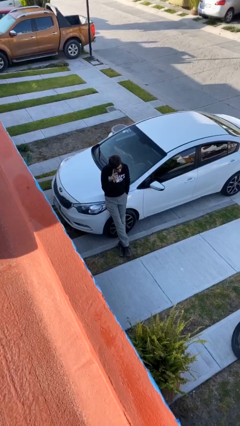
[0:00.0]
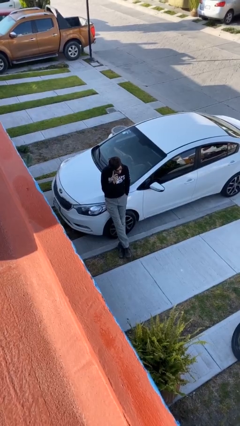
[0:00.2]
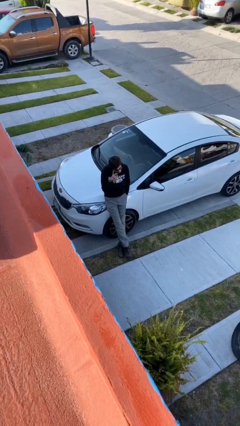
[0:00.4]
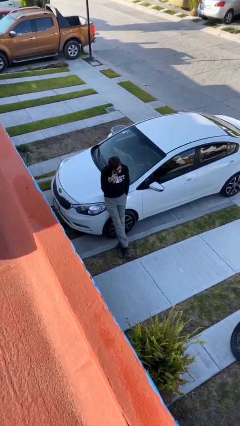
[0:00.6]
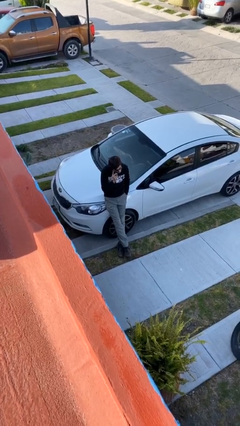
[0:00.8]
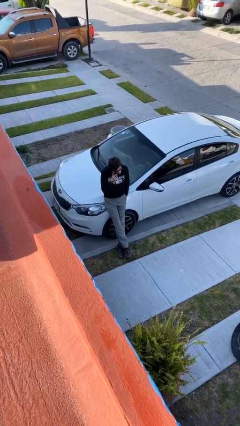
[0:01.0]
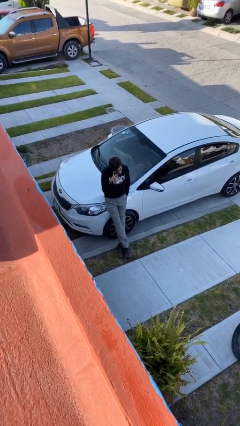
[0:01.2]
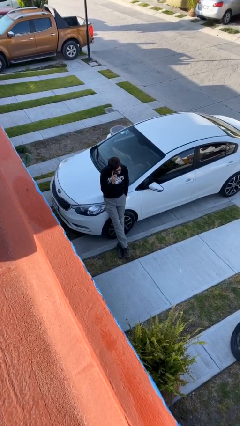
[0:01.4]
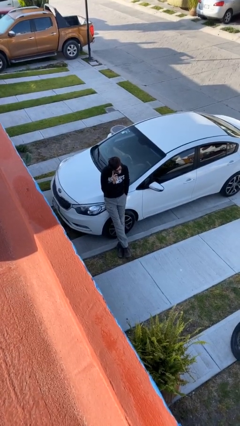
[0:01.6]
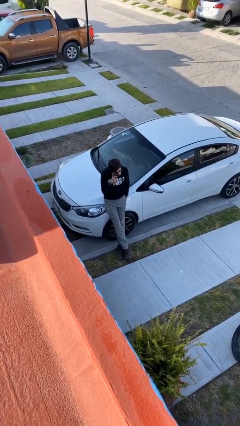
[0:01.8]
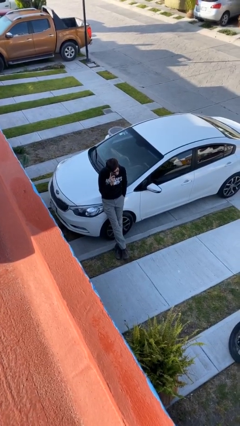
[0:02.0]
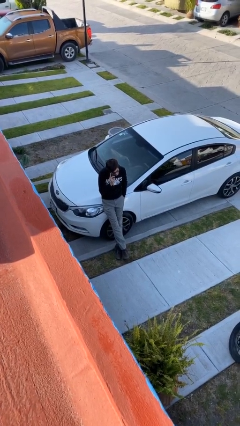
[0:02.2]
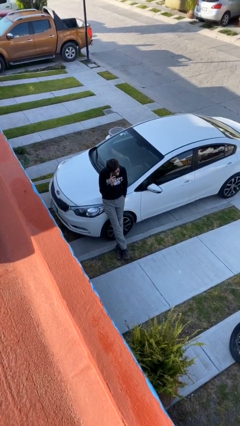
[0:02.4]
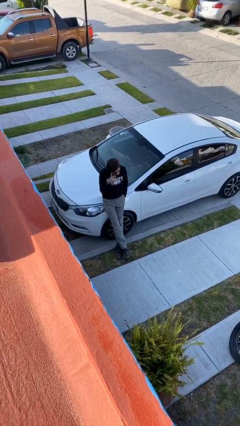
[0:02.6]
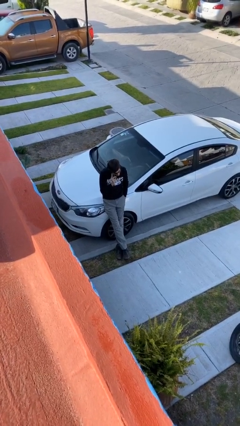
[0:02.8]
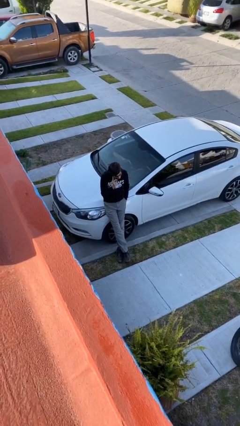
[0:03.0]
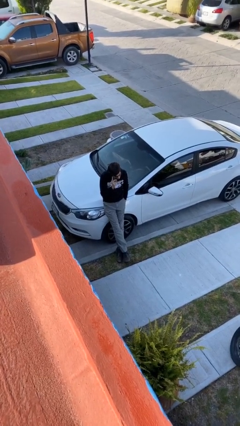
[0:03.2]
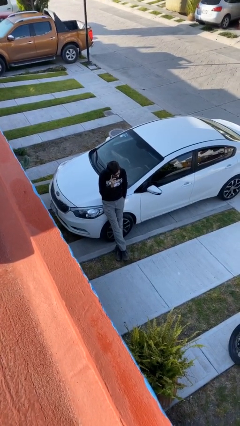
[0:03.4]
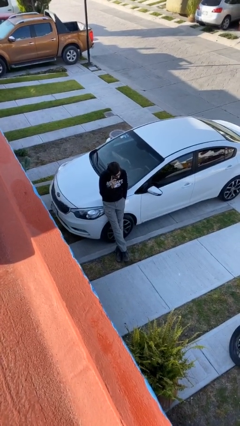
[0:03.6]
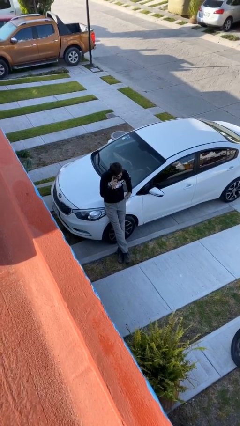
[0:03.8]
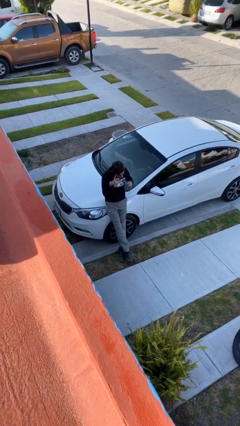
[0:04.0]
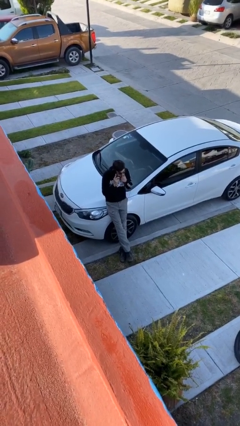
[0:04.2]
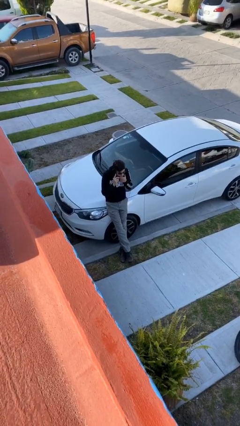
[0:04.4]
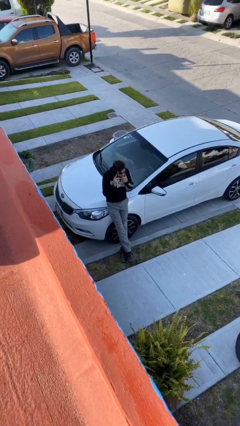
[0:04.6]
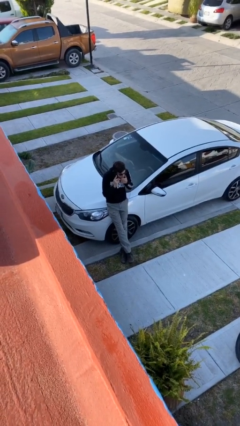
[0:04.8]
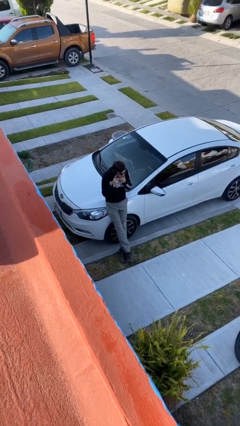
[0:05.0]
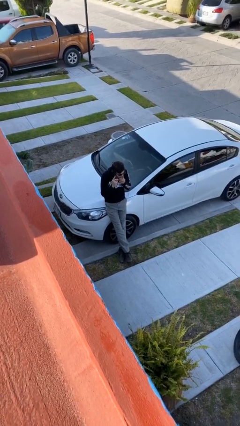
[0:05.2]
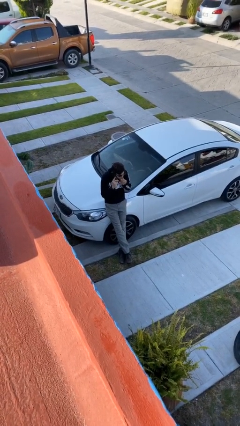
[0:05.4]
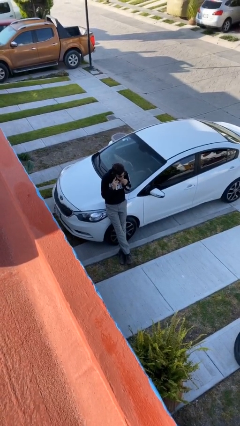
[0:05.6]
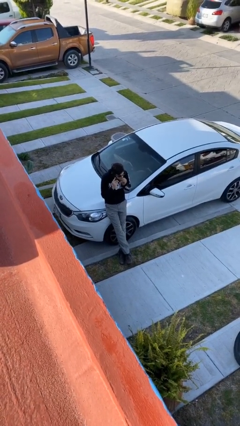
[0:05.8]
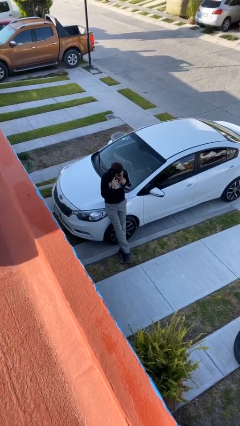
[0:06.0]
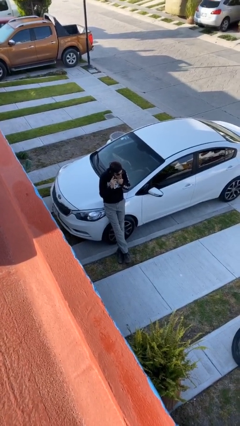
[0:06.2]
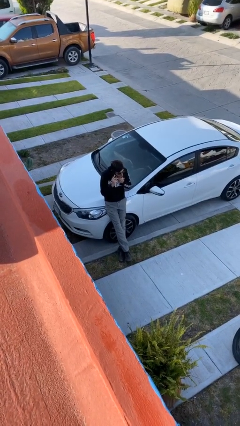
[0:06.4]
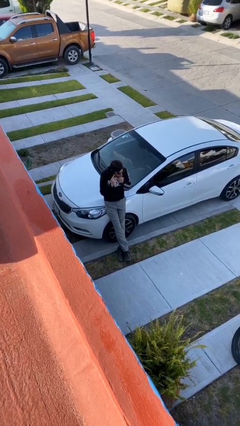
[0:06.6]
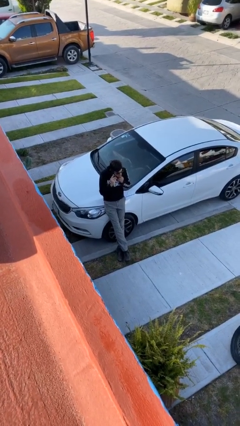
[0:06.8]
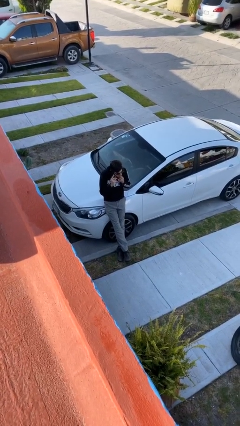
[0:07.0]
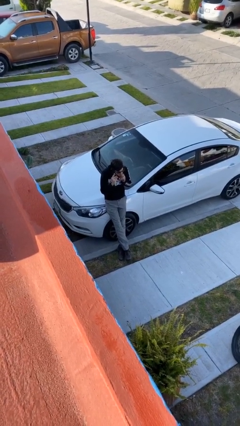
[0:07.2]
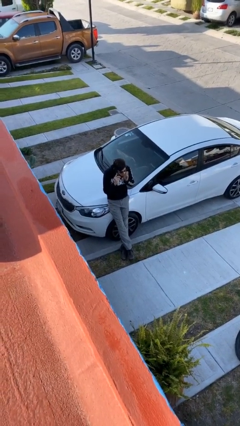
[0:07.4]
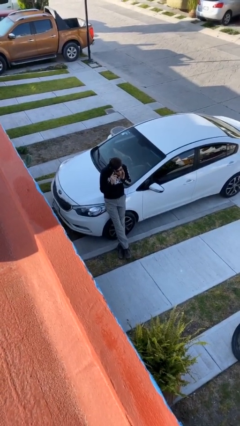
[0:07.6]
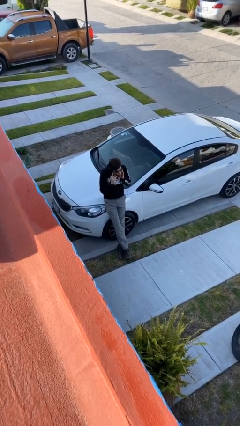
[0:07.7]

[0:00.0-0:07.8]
person talks on phone

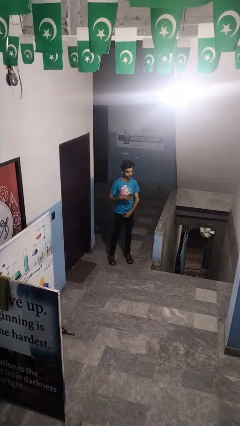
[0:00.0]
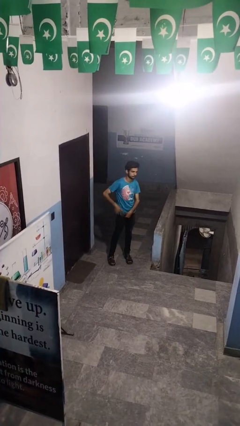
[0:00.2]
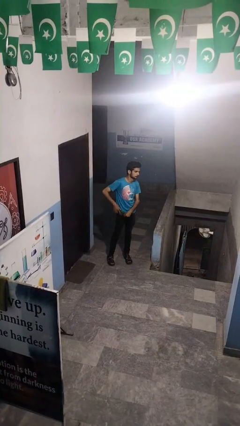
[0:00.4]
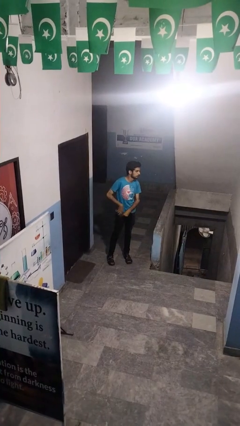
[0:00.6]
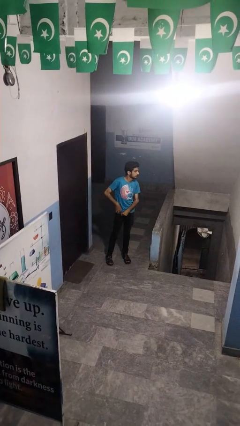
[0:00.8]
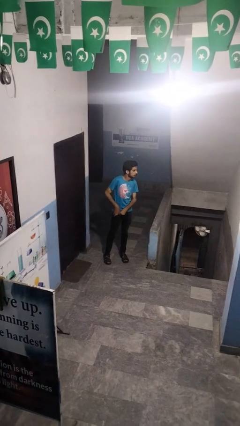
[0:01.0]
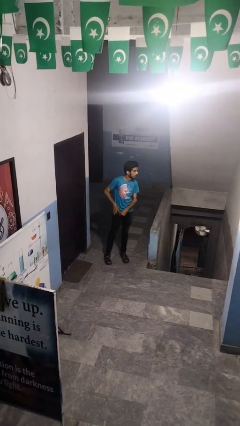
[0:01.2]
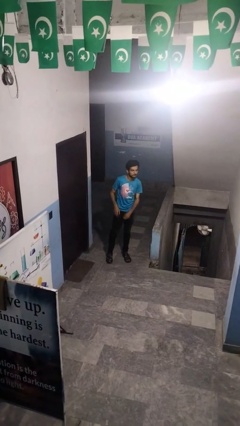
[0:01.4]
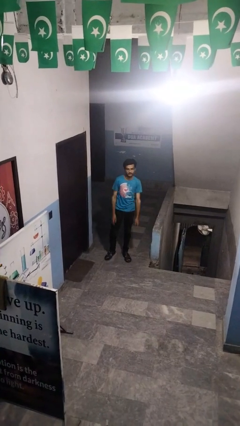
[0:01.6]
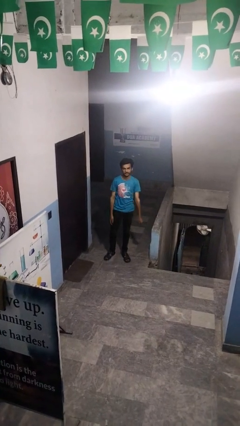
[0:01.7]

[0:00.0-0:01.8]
person puts phone into pocket

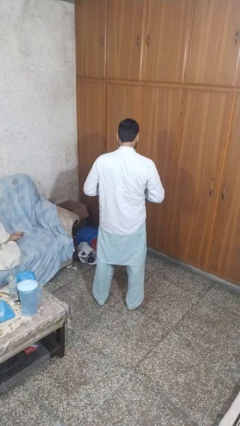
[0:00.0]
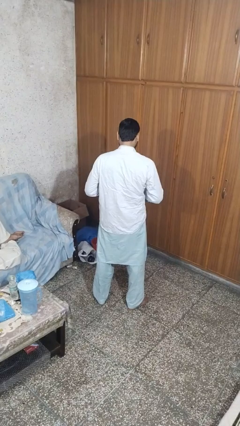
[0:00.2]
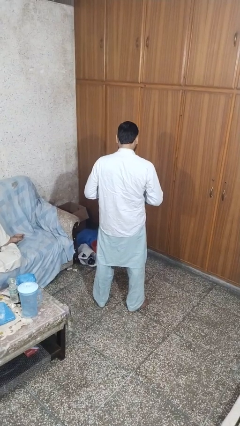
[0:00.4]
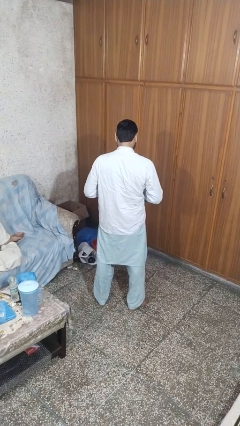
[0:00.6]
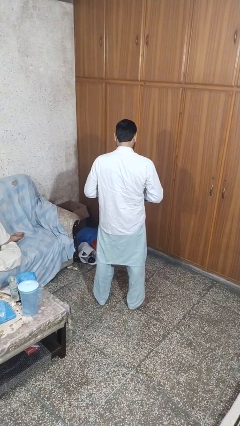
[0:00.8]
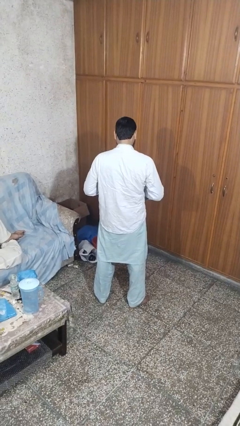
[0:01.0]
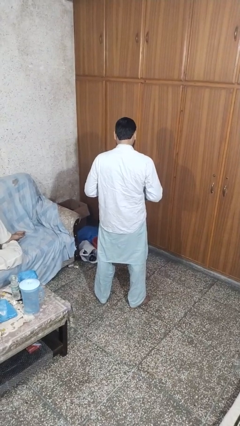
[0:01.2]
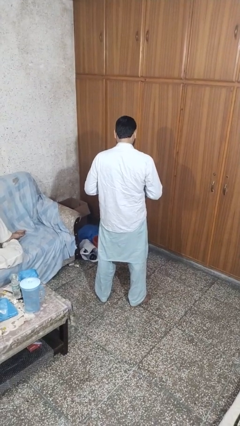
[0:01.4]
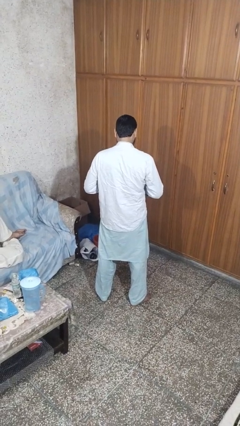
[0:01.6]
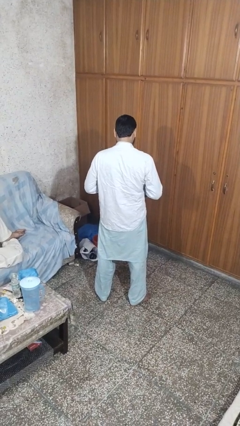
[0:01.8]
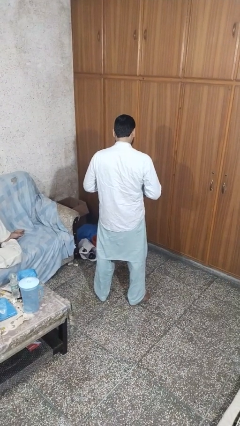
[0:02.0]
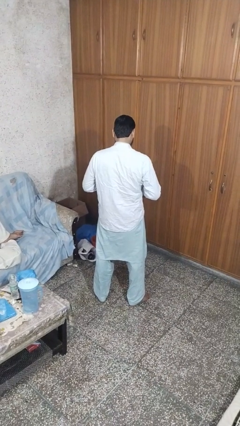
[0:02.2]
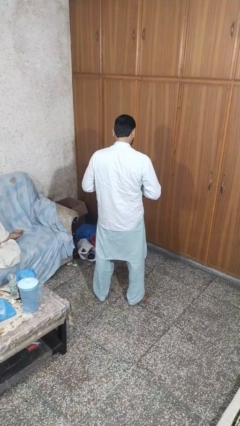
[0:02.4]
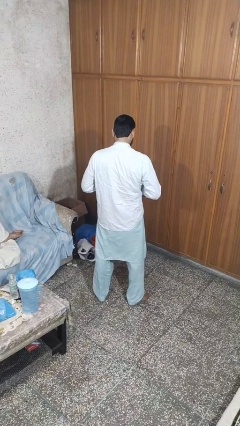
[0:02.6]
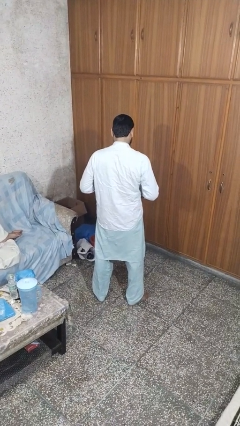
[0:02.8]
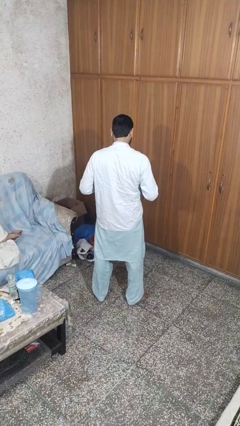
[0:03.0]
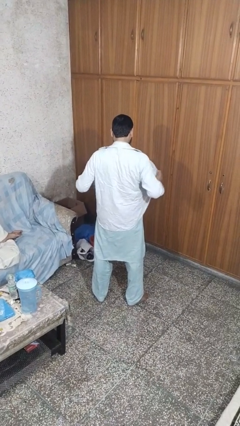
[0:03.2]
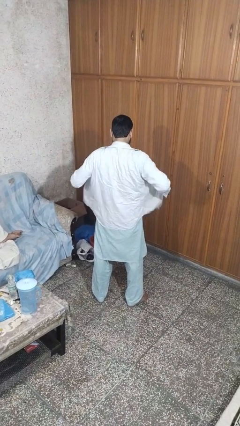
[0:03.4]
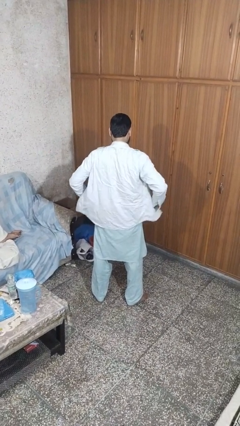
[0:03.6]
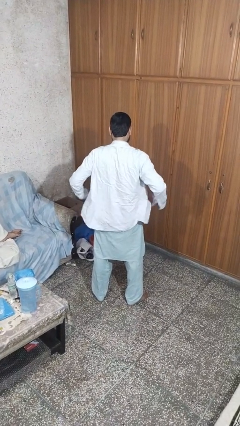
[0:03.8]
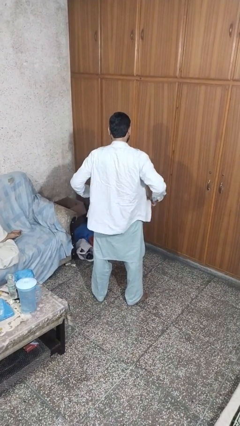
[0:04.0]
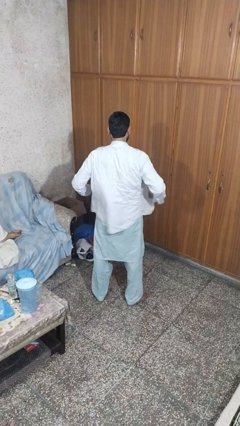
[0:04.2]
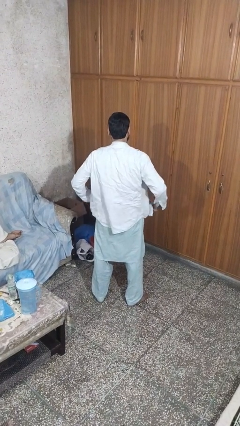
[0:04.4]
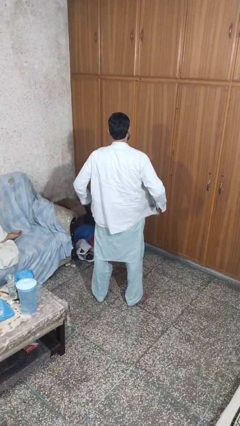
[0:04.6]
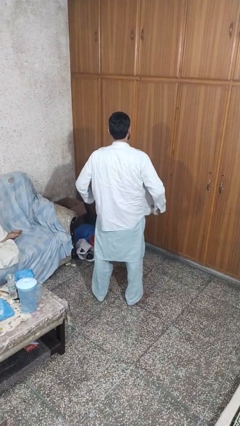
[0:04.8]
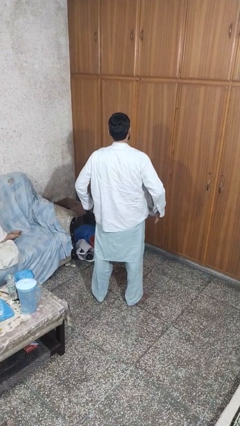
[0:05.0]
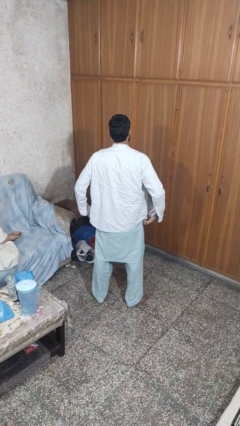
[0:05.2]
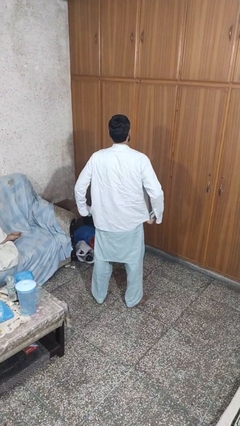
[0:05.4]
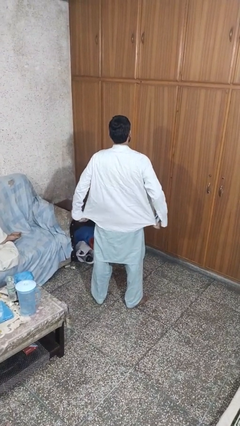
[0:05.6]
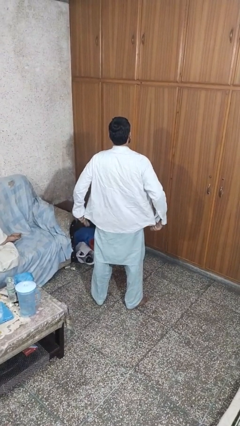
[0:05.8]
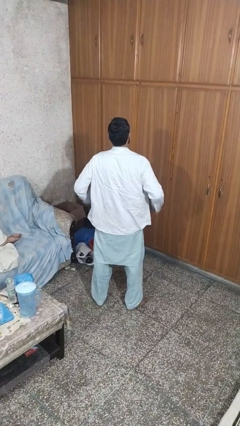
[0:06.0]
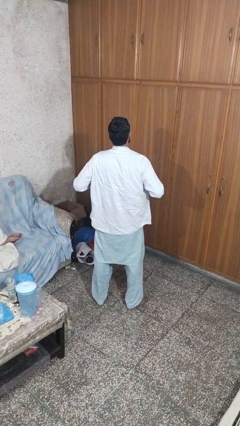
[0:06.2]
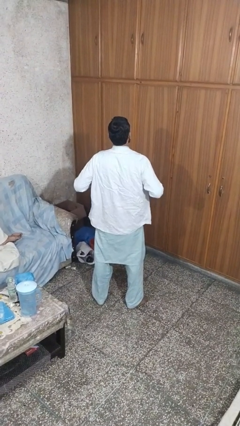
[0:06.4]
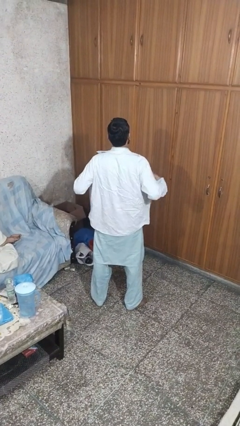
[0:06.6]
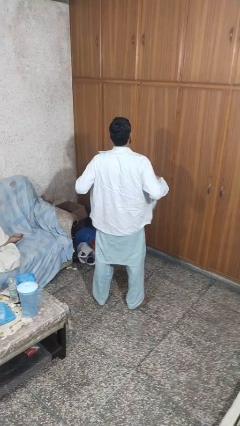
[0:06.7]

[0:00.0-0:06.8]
person unbuttons shirt

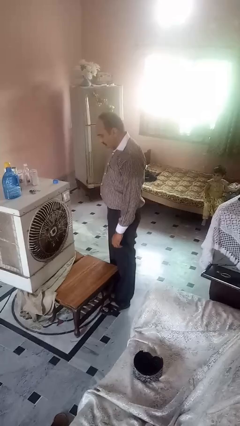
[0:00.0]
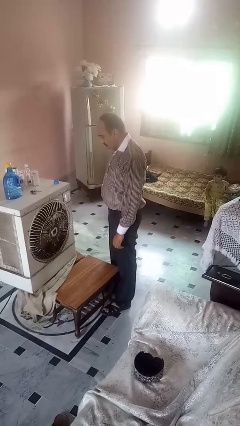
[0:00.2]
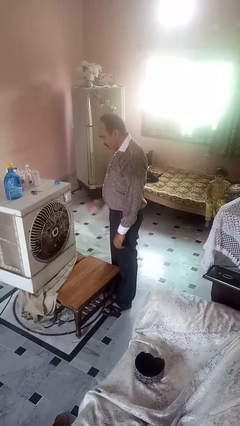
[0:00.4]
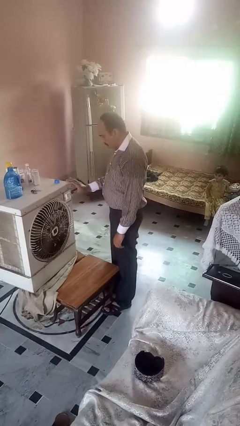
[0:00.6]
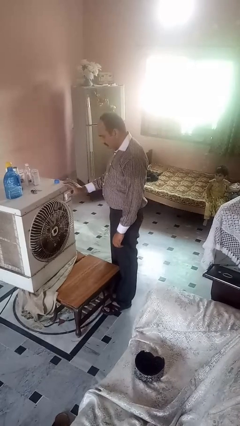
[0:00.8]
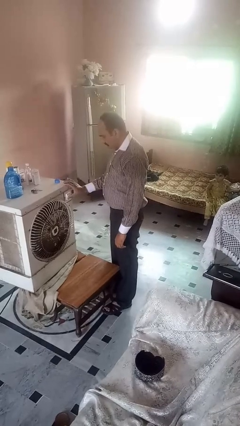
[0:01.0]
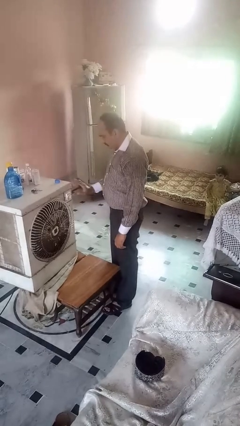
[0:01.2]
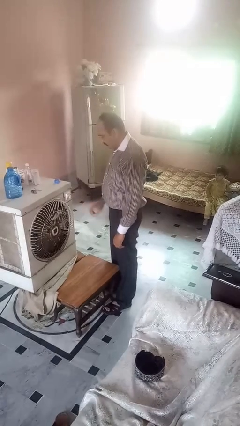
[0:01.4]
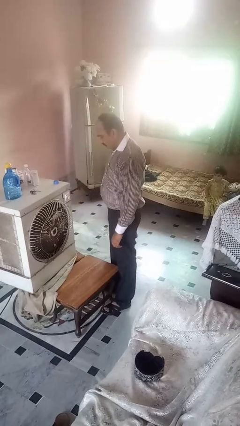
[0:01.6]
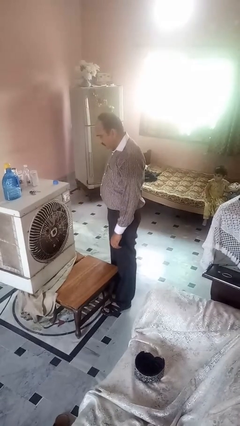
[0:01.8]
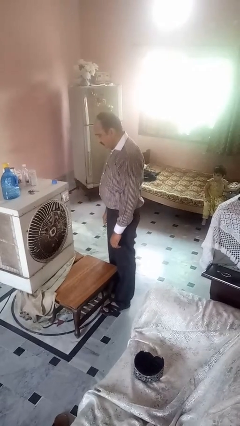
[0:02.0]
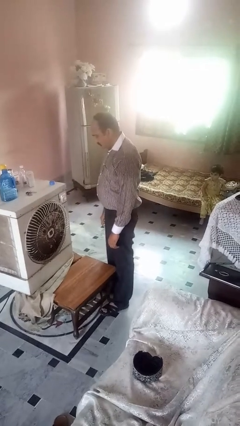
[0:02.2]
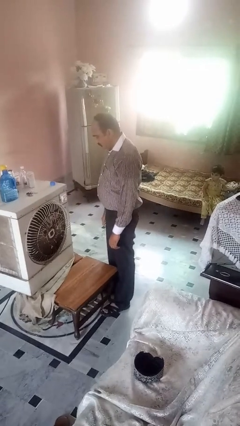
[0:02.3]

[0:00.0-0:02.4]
person turns on fan
